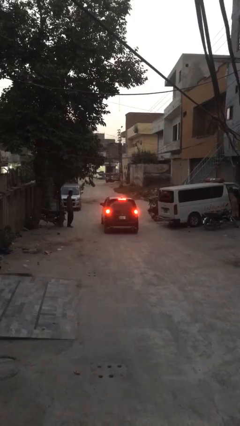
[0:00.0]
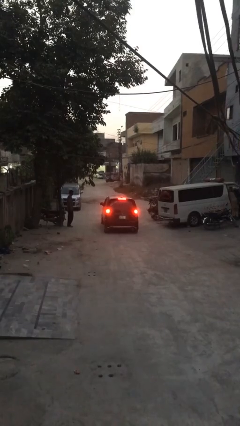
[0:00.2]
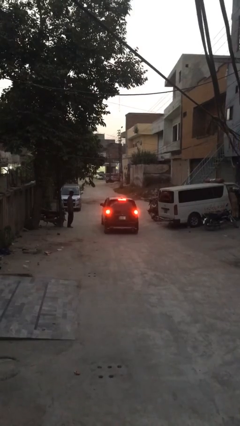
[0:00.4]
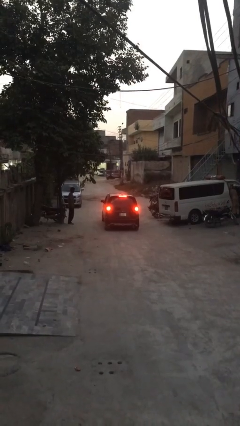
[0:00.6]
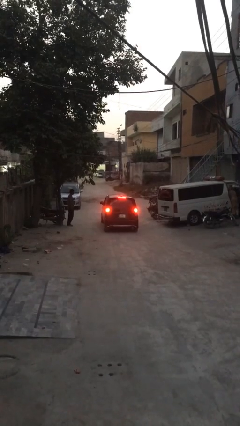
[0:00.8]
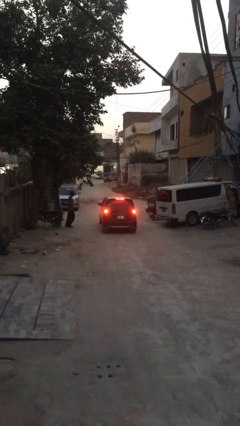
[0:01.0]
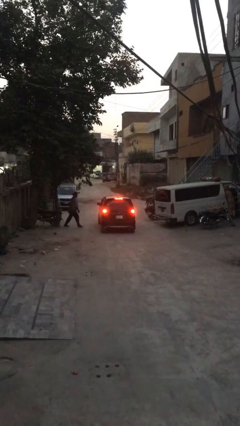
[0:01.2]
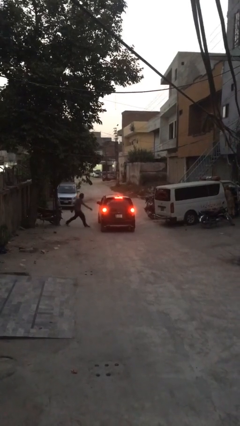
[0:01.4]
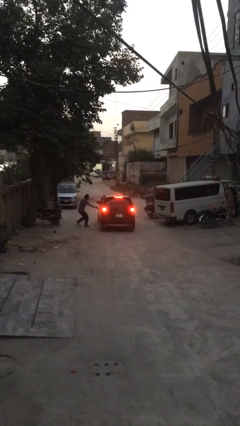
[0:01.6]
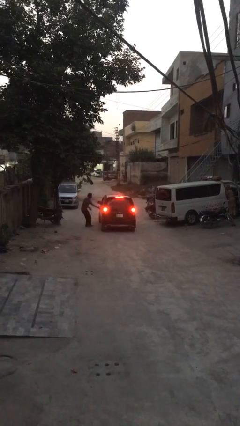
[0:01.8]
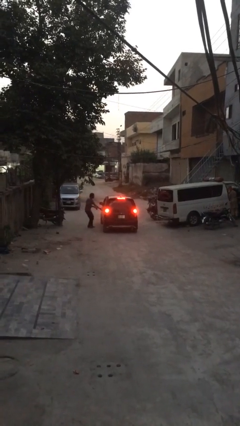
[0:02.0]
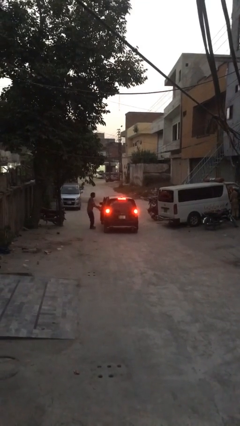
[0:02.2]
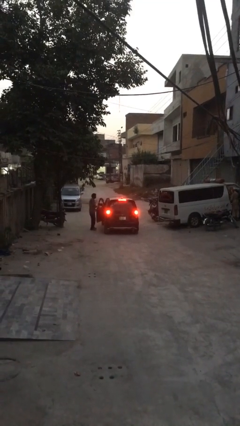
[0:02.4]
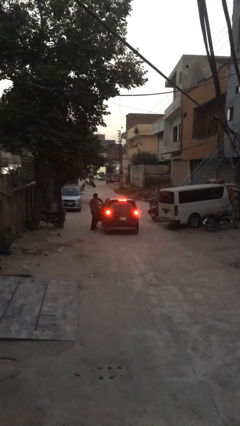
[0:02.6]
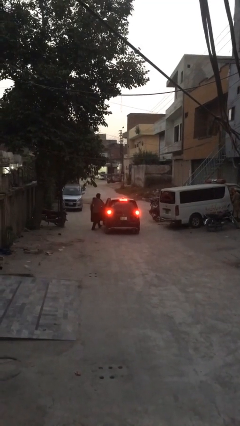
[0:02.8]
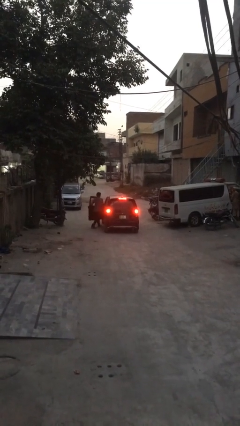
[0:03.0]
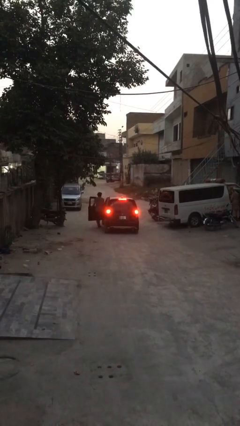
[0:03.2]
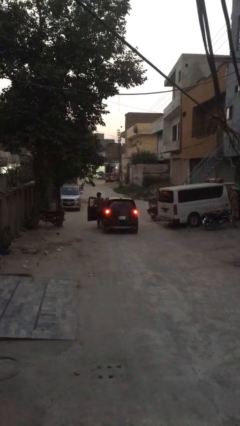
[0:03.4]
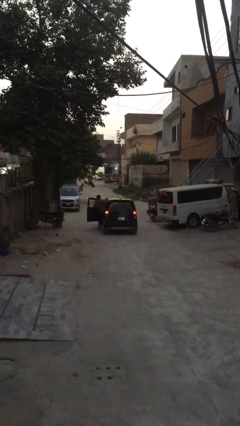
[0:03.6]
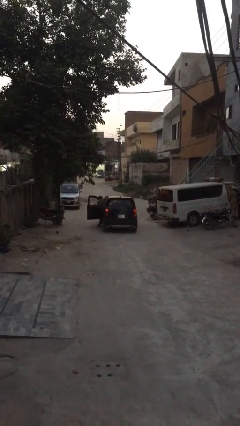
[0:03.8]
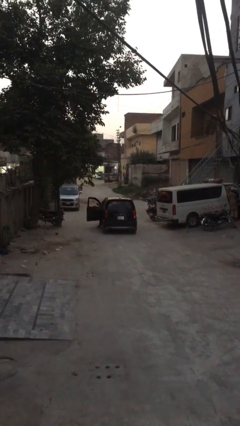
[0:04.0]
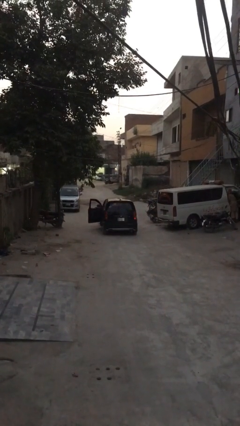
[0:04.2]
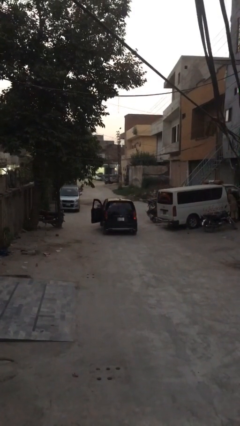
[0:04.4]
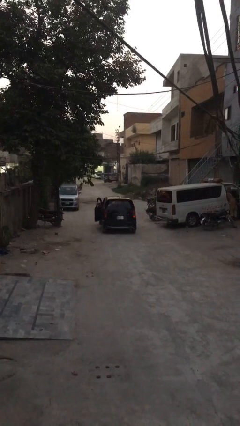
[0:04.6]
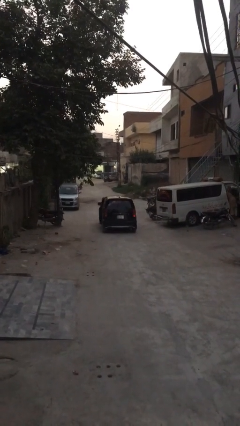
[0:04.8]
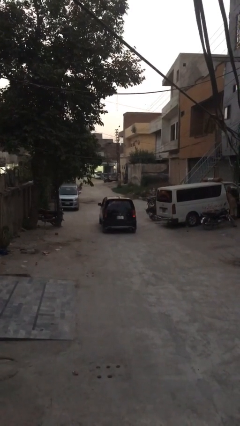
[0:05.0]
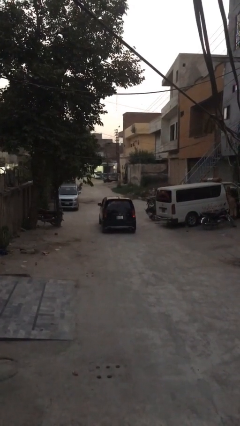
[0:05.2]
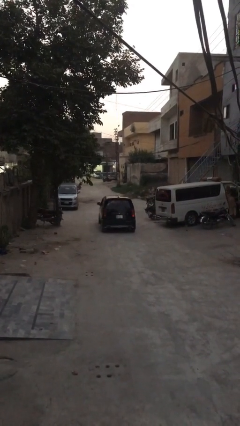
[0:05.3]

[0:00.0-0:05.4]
car picks up person

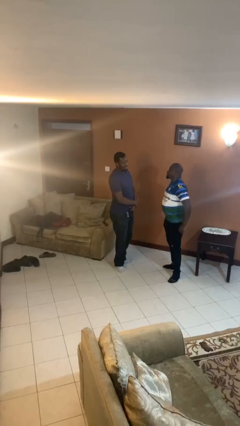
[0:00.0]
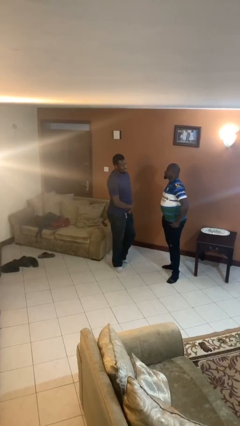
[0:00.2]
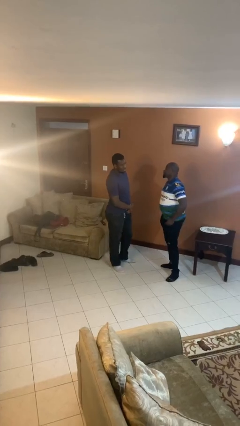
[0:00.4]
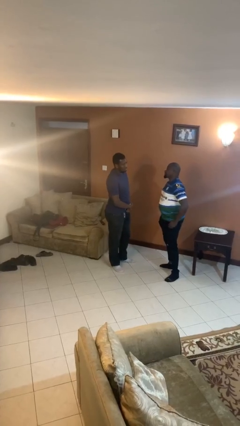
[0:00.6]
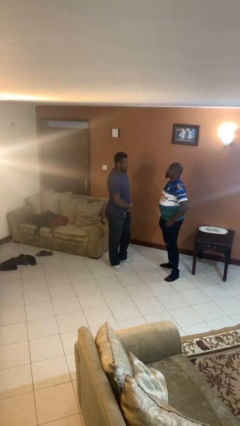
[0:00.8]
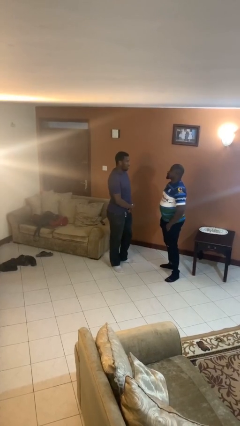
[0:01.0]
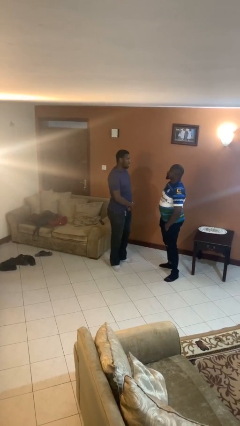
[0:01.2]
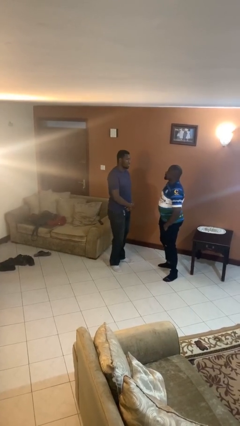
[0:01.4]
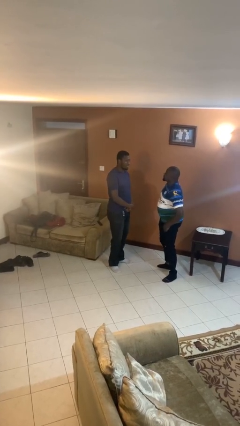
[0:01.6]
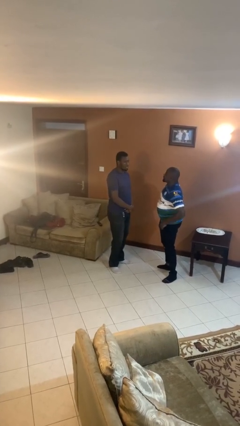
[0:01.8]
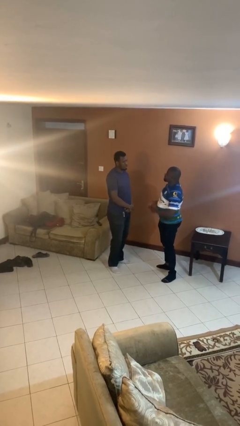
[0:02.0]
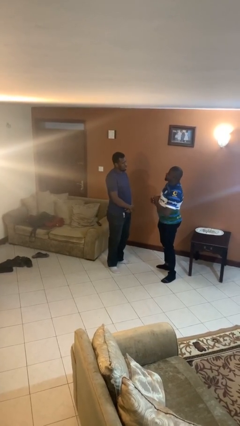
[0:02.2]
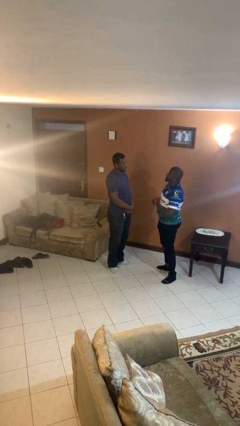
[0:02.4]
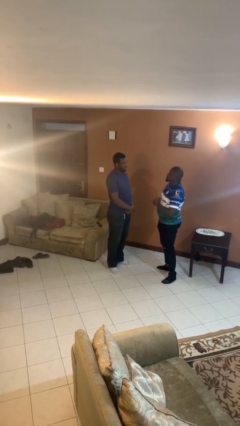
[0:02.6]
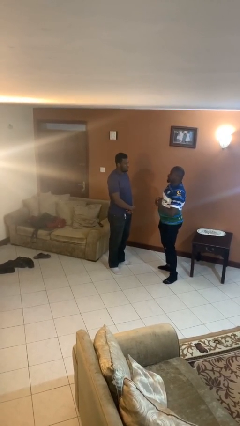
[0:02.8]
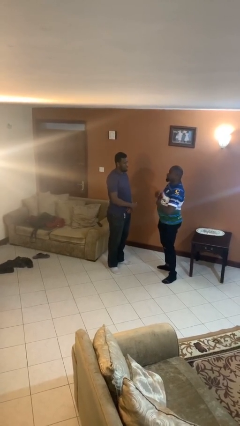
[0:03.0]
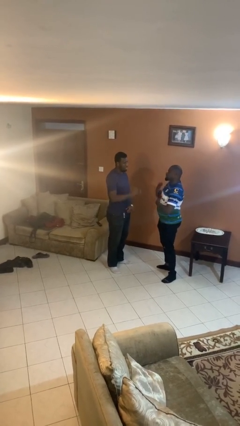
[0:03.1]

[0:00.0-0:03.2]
person talks to person

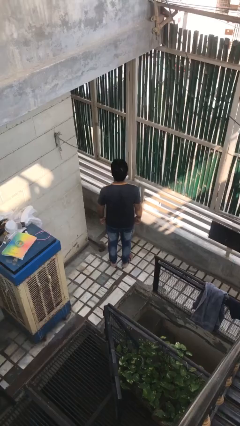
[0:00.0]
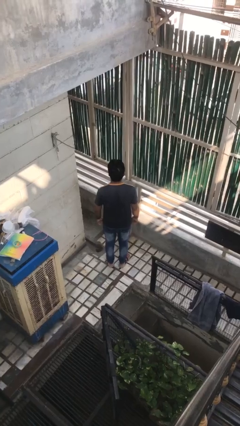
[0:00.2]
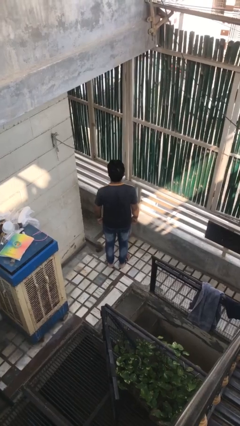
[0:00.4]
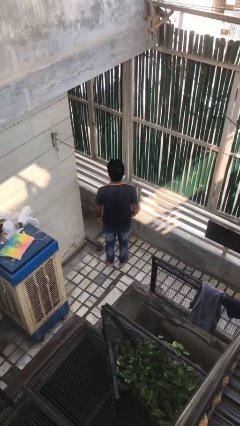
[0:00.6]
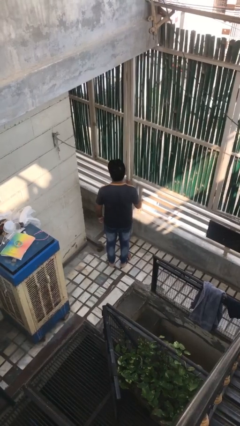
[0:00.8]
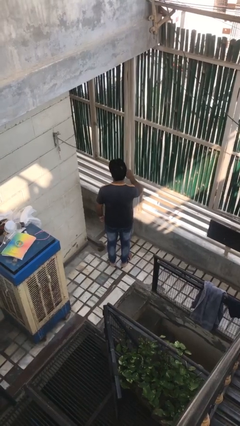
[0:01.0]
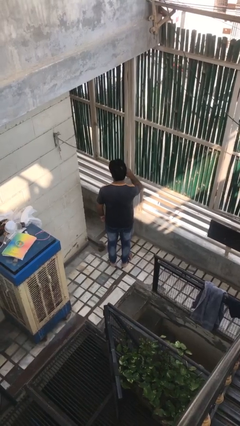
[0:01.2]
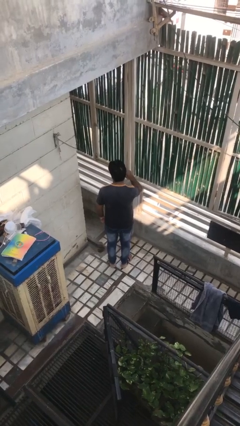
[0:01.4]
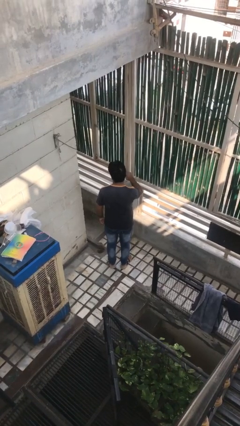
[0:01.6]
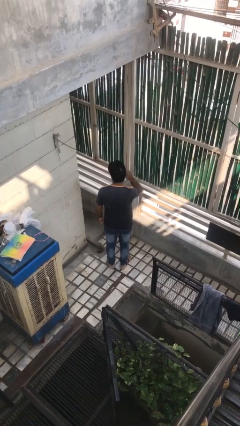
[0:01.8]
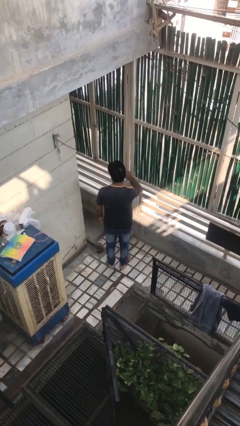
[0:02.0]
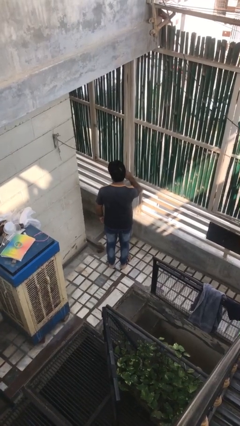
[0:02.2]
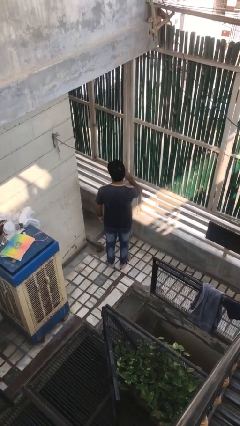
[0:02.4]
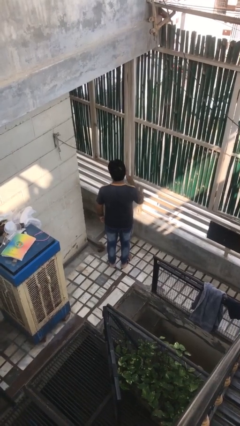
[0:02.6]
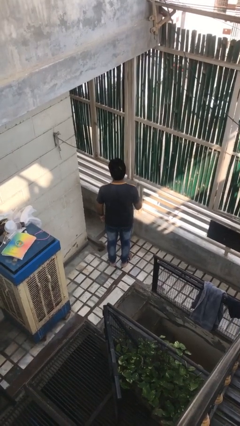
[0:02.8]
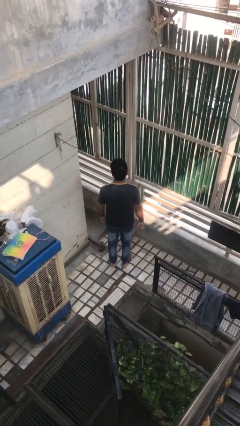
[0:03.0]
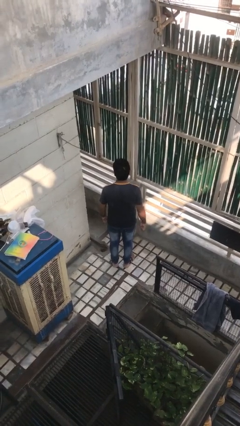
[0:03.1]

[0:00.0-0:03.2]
person touches earlobe

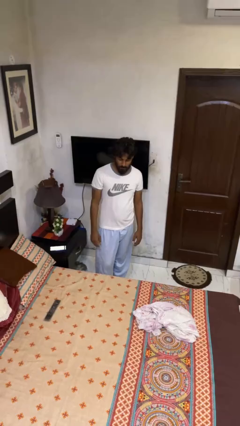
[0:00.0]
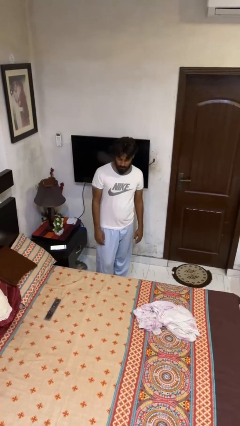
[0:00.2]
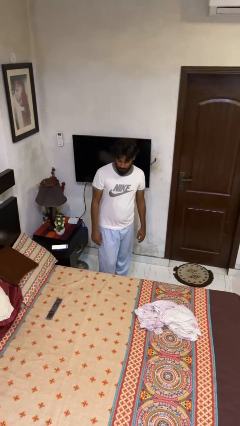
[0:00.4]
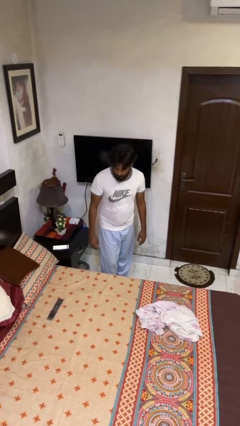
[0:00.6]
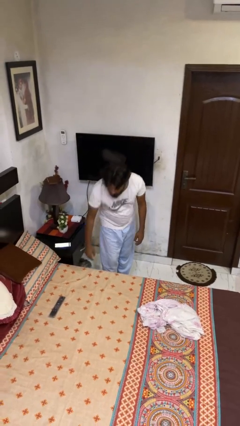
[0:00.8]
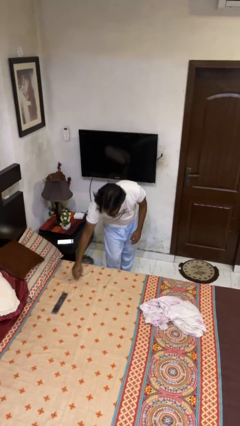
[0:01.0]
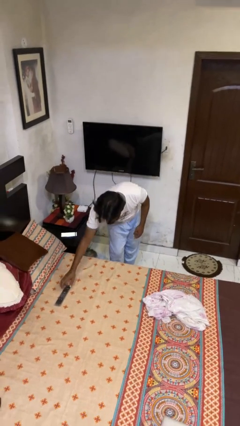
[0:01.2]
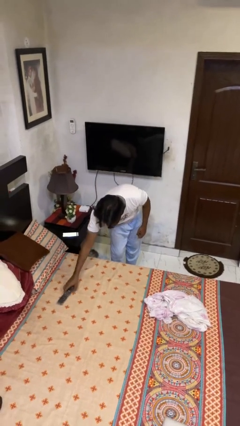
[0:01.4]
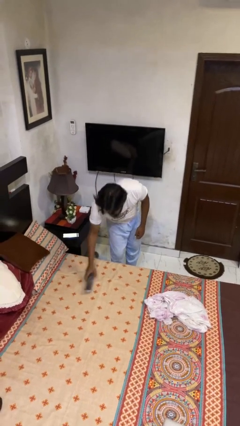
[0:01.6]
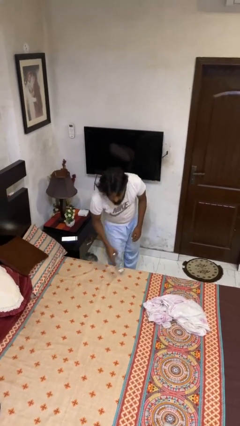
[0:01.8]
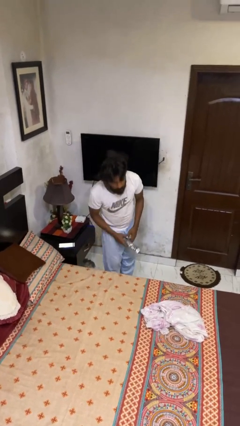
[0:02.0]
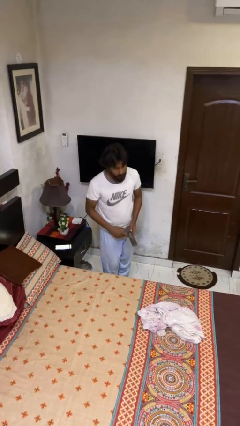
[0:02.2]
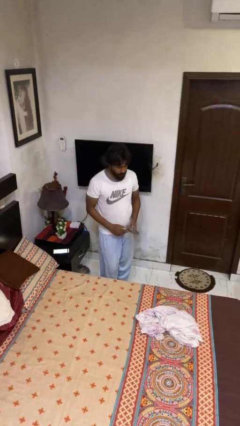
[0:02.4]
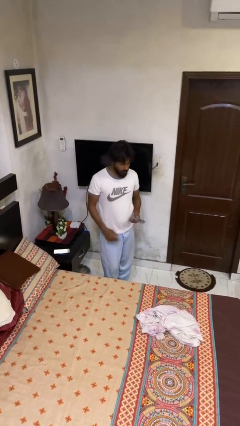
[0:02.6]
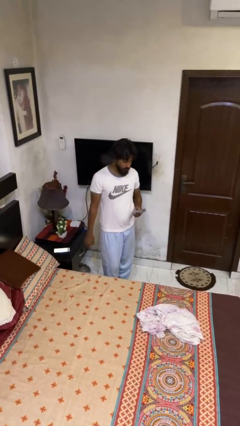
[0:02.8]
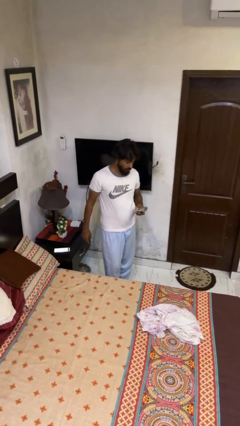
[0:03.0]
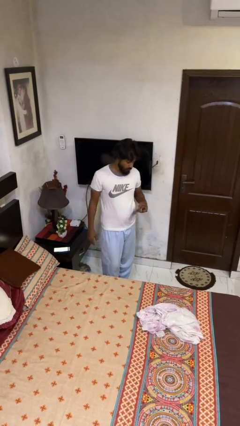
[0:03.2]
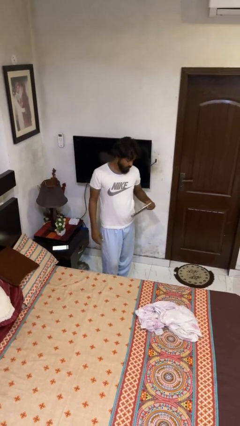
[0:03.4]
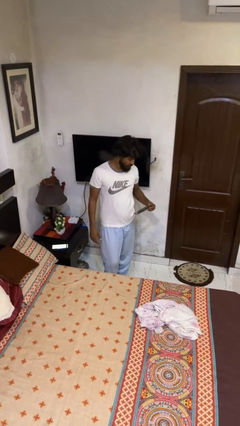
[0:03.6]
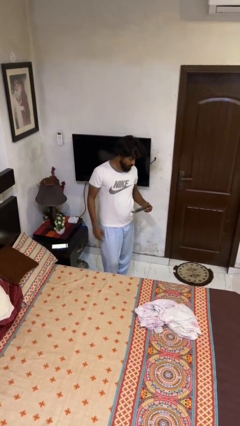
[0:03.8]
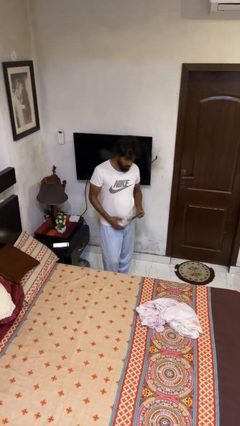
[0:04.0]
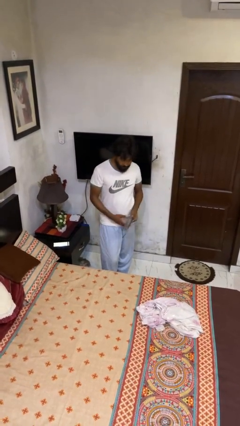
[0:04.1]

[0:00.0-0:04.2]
person picks up object from bed

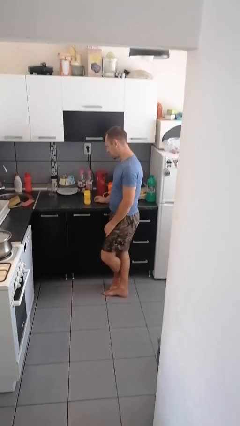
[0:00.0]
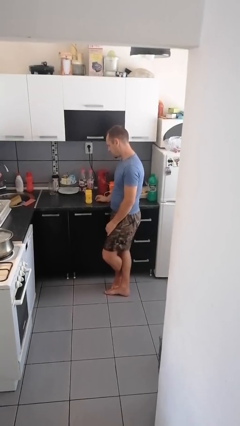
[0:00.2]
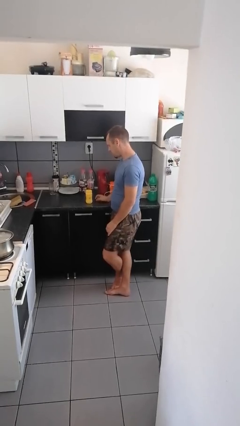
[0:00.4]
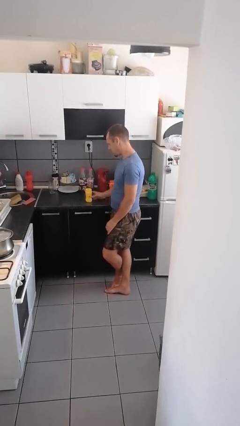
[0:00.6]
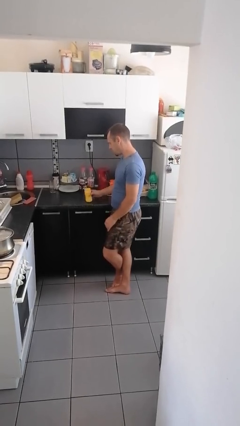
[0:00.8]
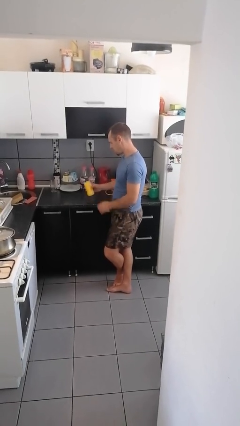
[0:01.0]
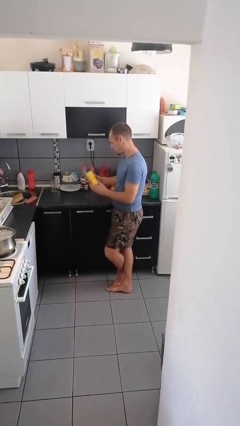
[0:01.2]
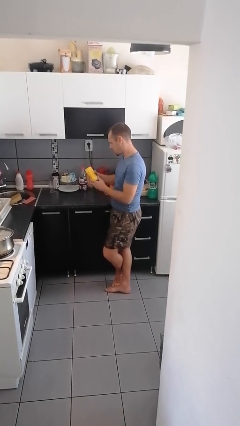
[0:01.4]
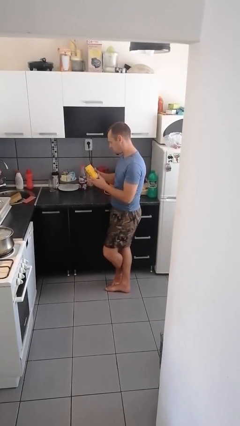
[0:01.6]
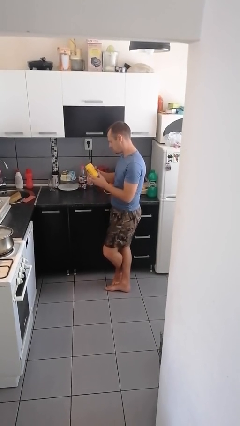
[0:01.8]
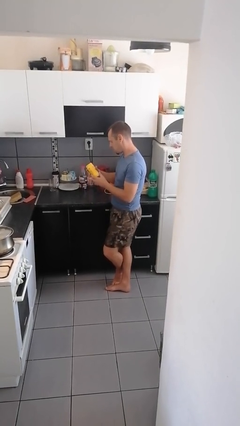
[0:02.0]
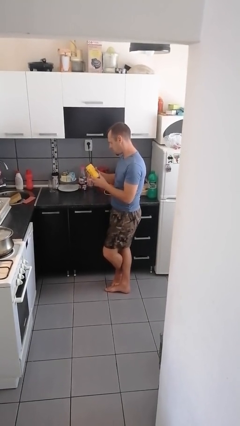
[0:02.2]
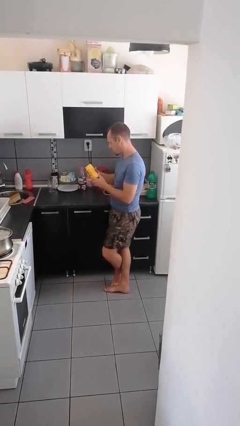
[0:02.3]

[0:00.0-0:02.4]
person picks up object from countertop
